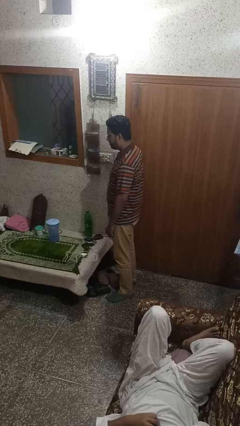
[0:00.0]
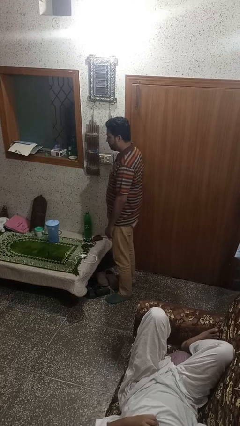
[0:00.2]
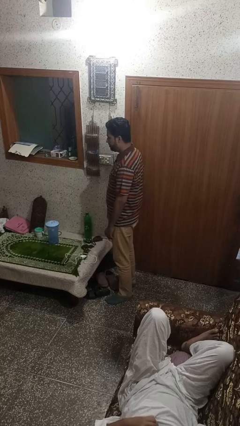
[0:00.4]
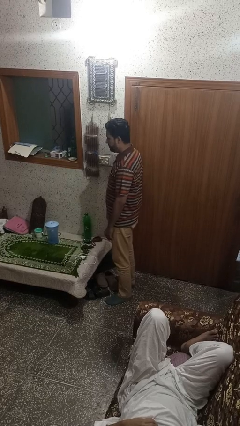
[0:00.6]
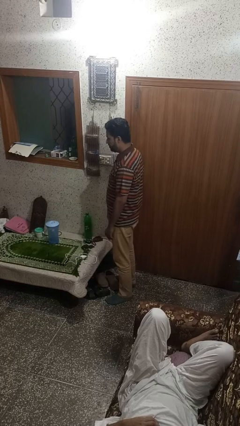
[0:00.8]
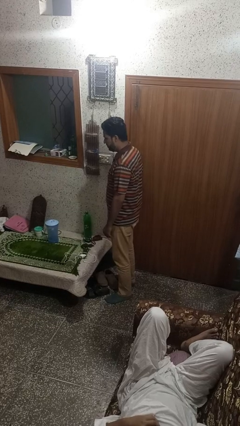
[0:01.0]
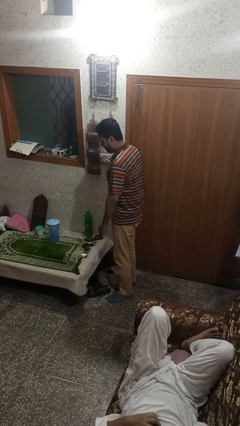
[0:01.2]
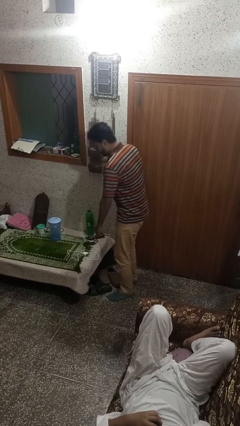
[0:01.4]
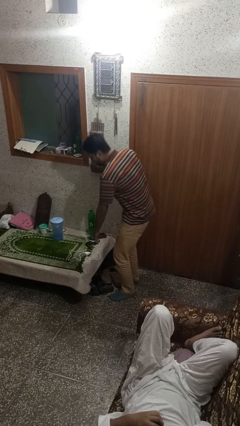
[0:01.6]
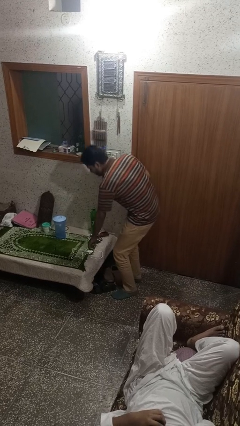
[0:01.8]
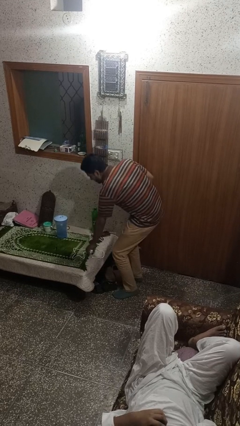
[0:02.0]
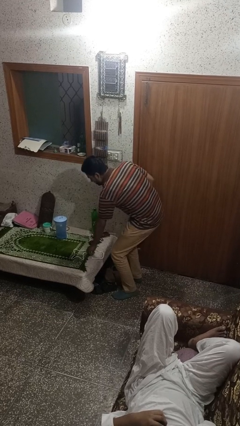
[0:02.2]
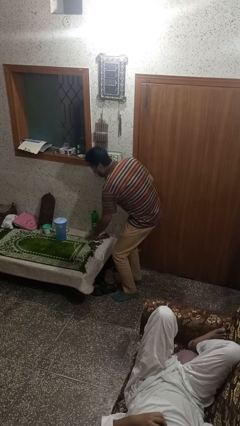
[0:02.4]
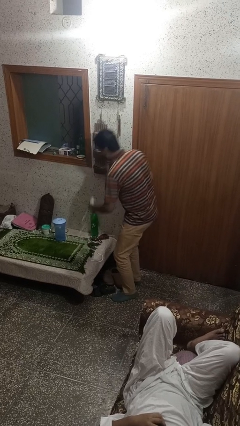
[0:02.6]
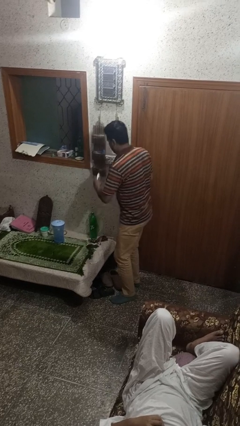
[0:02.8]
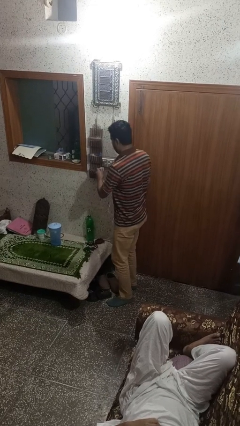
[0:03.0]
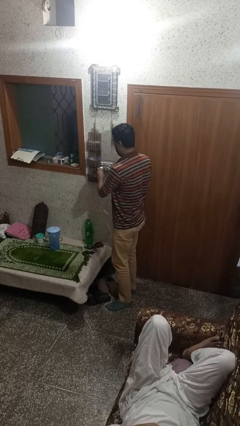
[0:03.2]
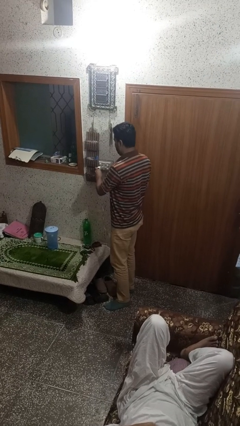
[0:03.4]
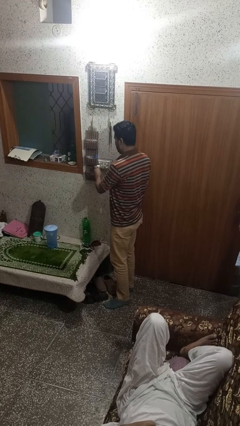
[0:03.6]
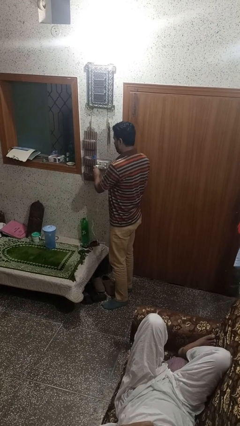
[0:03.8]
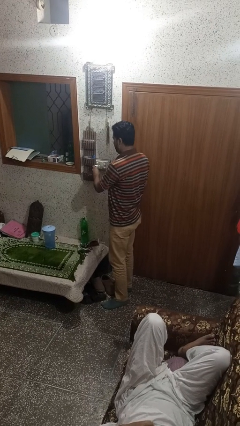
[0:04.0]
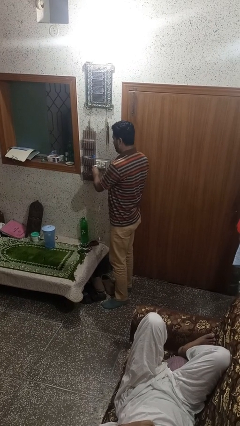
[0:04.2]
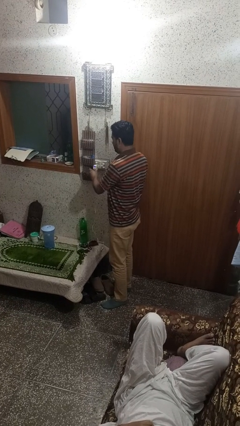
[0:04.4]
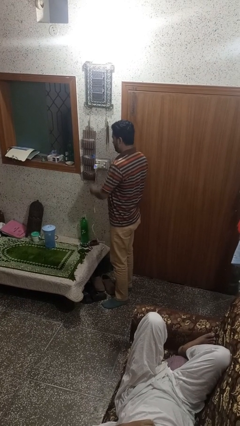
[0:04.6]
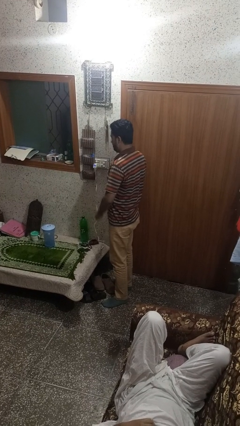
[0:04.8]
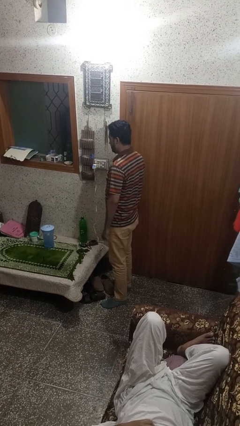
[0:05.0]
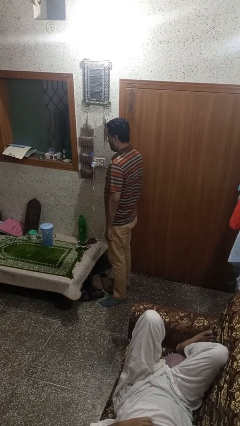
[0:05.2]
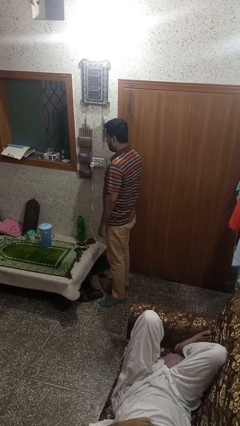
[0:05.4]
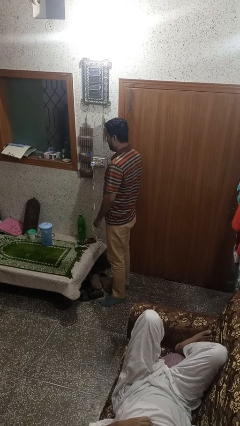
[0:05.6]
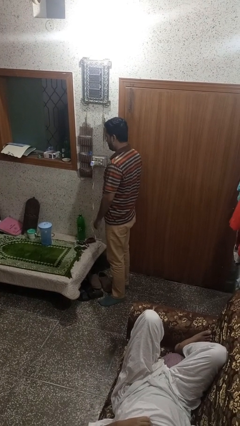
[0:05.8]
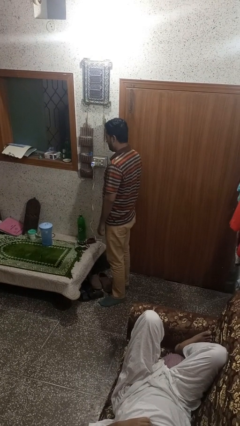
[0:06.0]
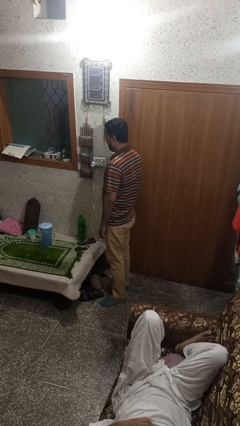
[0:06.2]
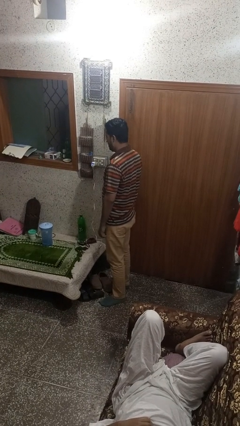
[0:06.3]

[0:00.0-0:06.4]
person plugs into electrical socket

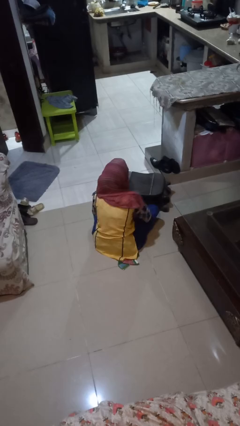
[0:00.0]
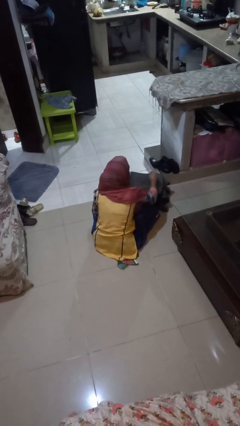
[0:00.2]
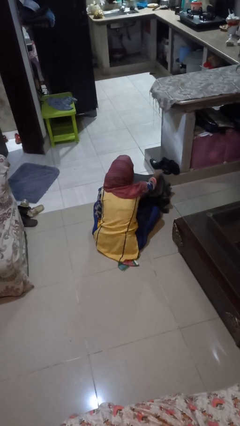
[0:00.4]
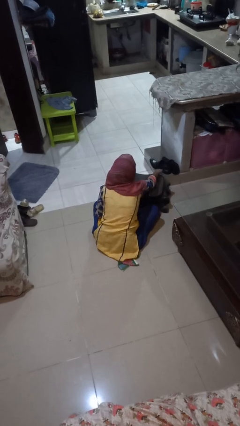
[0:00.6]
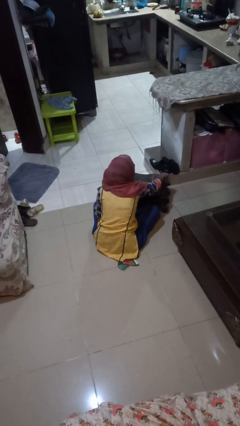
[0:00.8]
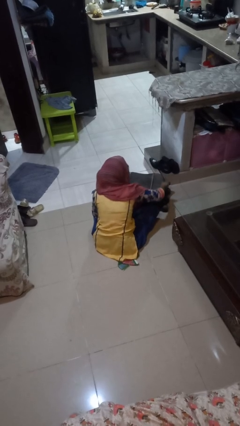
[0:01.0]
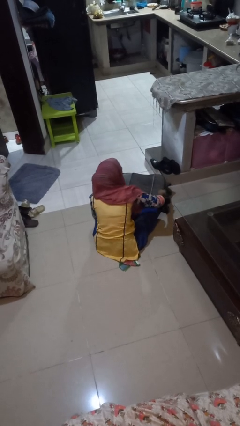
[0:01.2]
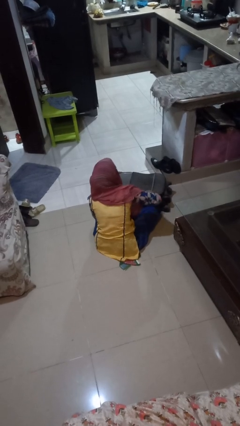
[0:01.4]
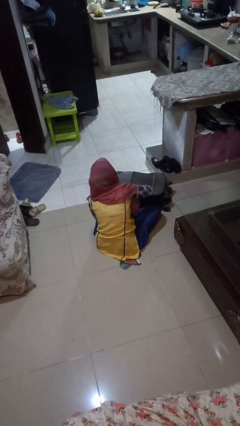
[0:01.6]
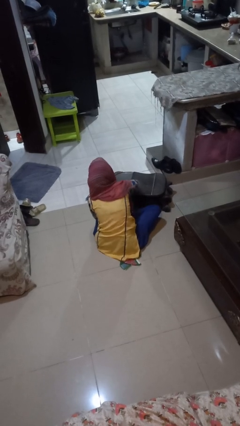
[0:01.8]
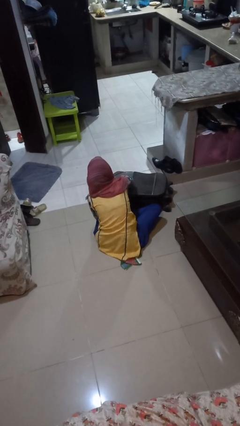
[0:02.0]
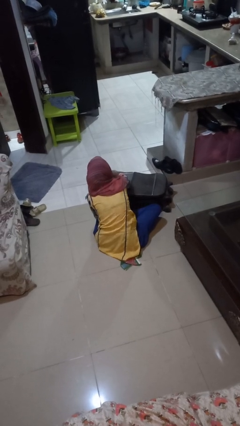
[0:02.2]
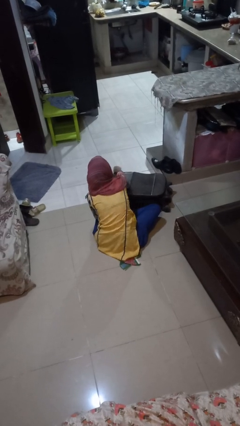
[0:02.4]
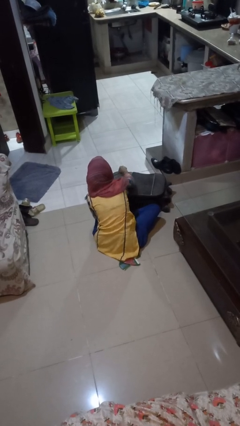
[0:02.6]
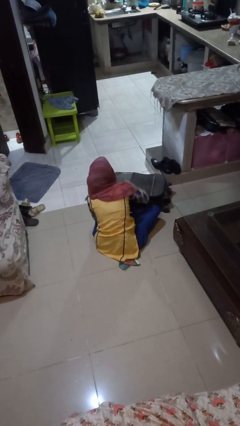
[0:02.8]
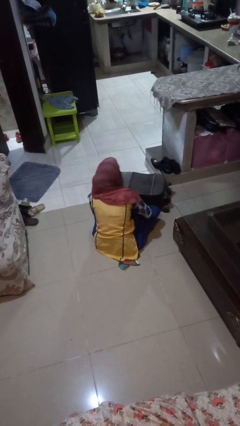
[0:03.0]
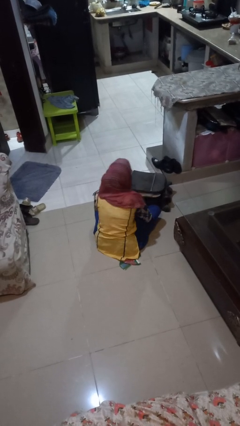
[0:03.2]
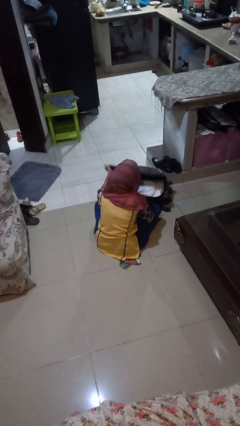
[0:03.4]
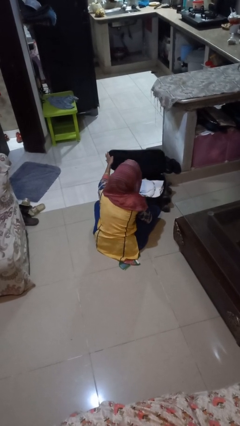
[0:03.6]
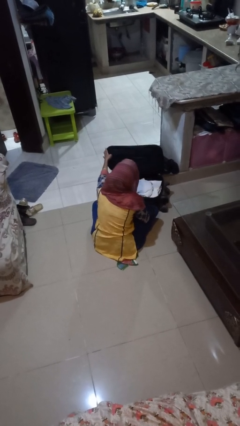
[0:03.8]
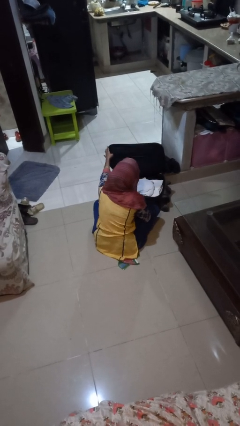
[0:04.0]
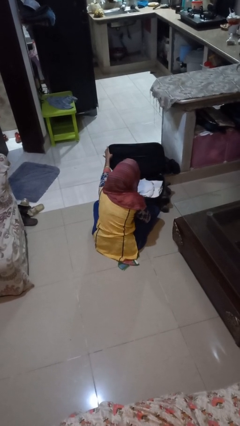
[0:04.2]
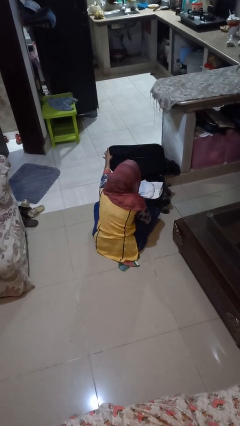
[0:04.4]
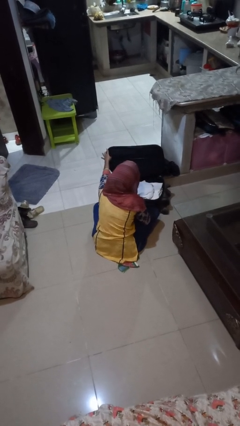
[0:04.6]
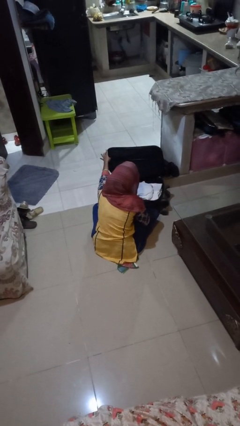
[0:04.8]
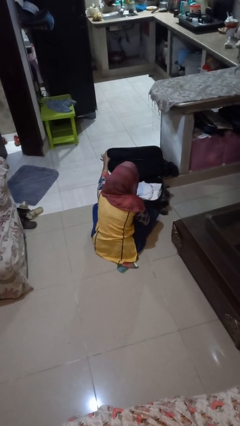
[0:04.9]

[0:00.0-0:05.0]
person opens suitcase

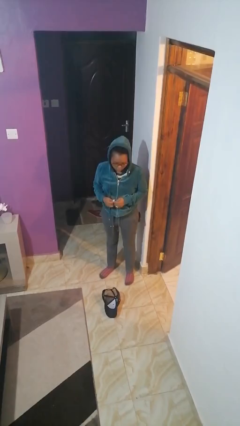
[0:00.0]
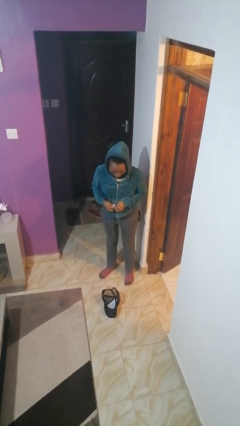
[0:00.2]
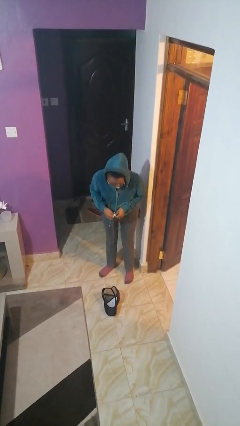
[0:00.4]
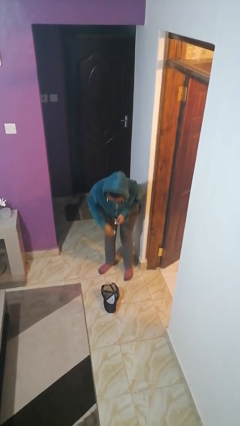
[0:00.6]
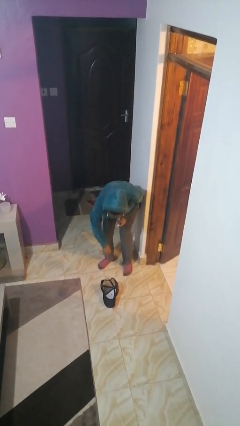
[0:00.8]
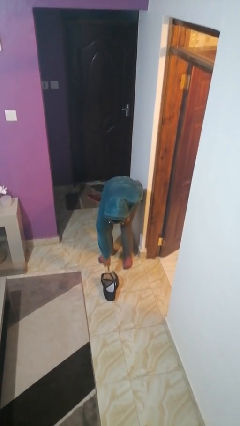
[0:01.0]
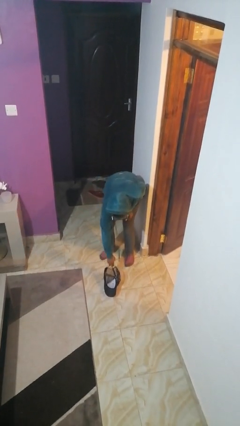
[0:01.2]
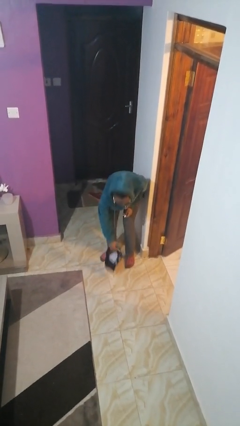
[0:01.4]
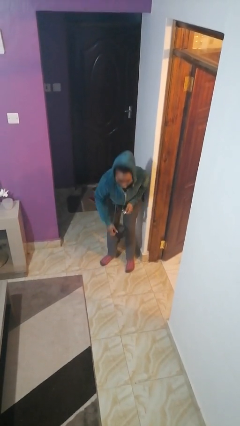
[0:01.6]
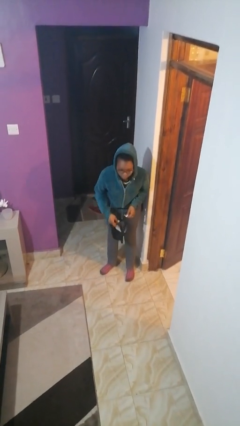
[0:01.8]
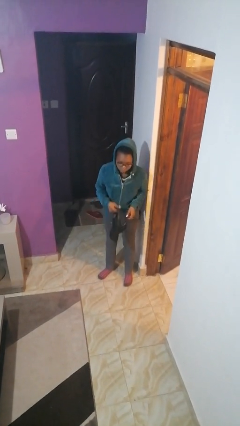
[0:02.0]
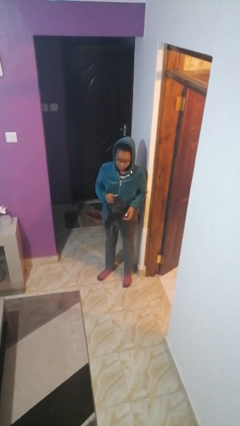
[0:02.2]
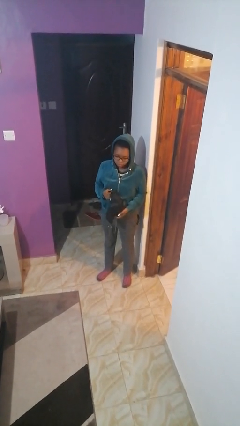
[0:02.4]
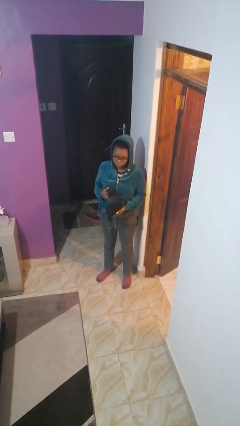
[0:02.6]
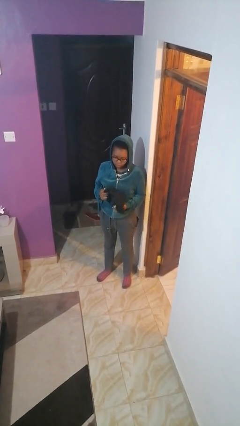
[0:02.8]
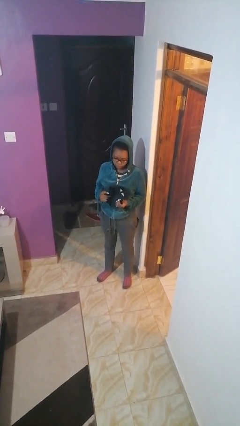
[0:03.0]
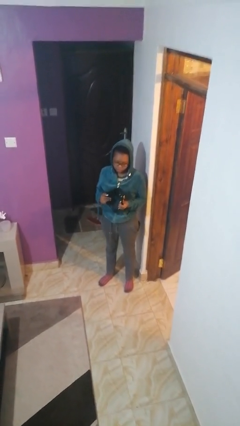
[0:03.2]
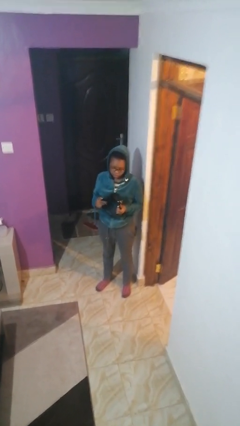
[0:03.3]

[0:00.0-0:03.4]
person picks up object from floor

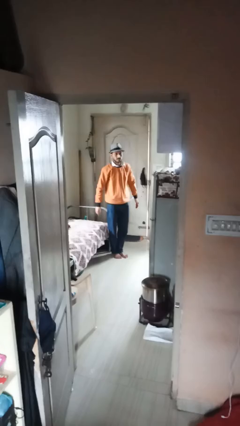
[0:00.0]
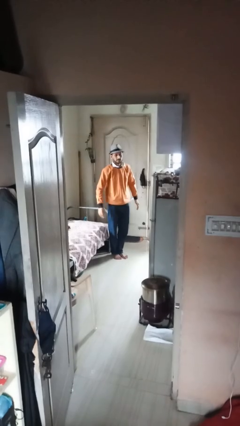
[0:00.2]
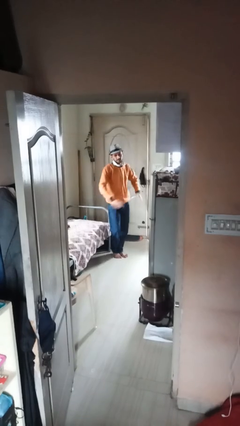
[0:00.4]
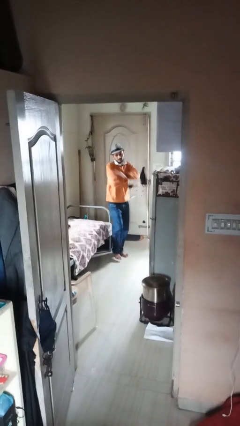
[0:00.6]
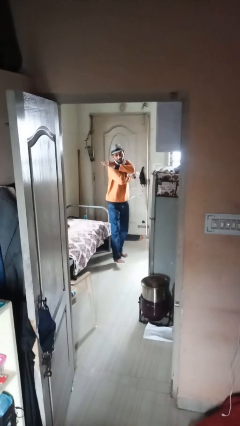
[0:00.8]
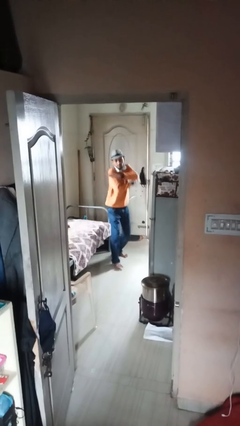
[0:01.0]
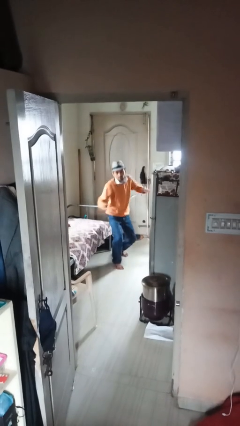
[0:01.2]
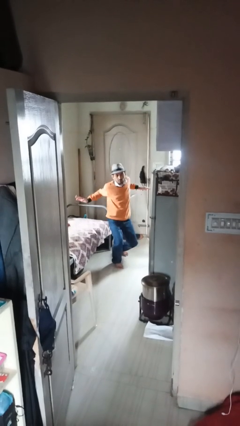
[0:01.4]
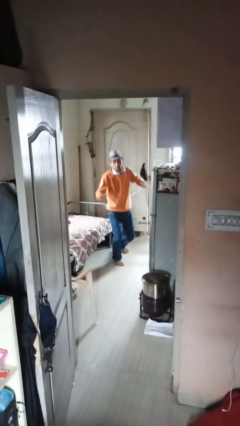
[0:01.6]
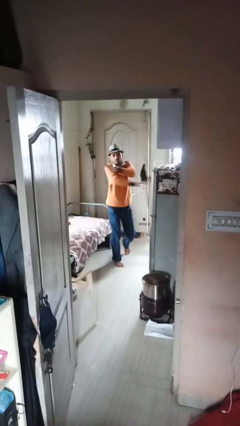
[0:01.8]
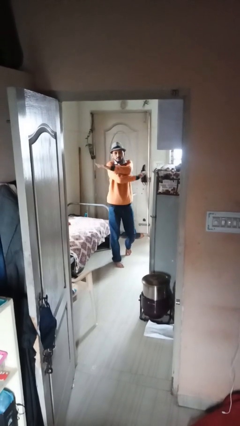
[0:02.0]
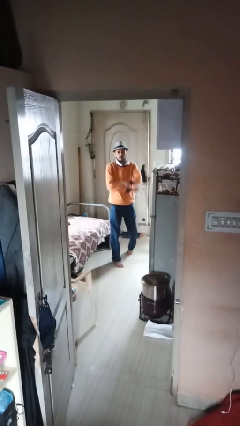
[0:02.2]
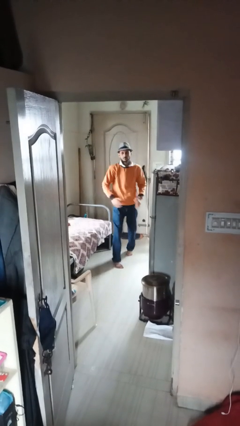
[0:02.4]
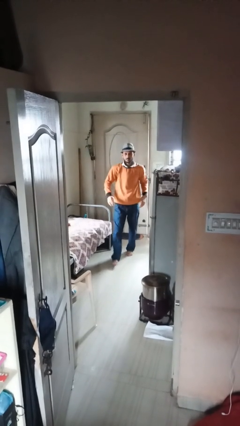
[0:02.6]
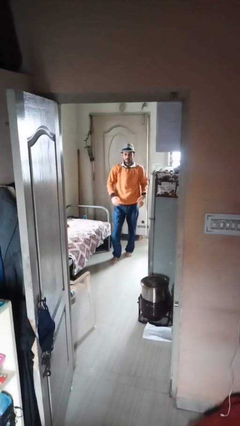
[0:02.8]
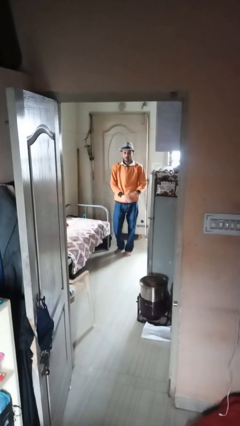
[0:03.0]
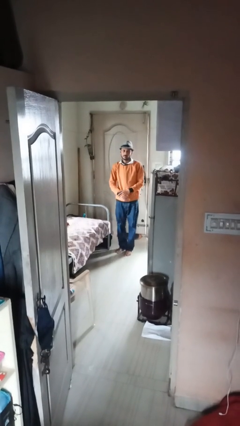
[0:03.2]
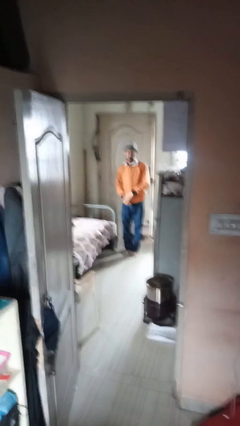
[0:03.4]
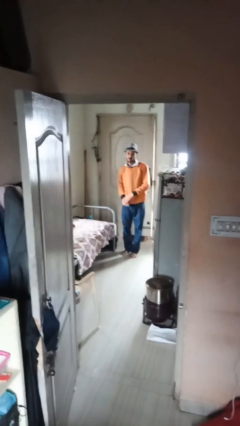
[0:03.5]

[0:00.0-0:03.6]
person karate chop
